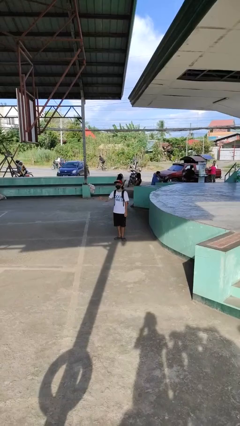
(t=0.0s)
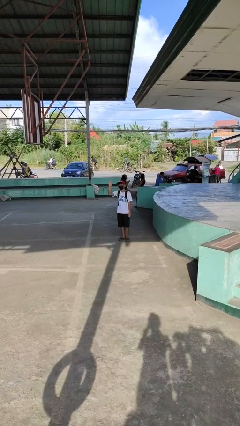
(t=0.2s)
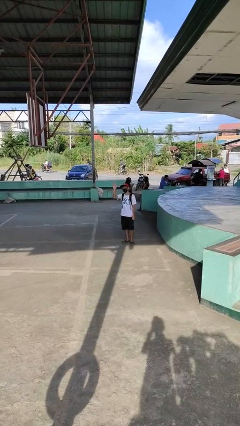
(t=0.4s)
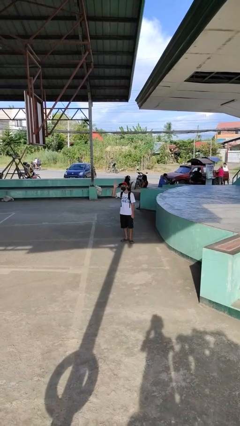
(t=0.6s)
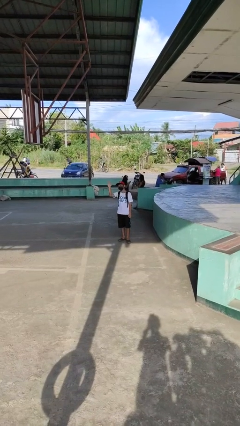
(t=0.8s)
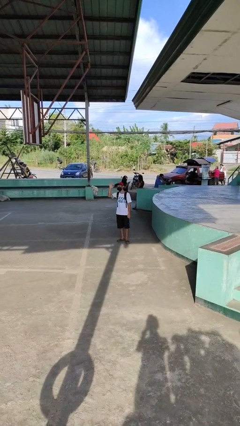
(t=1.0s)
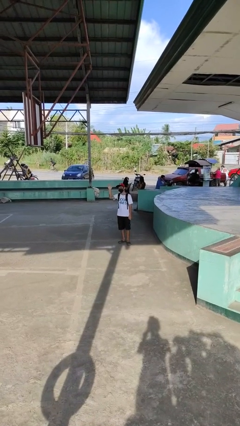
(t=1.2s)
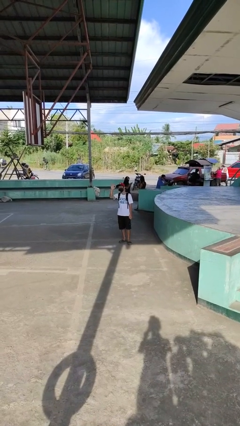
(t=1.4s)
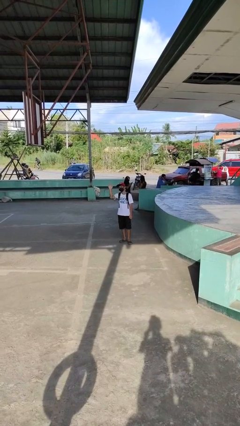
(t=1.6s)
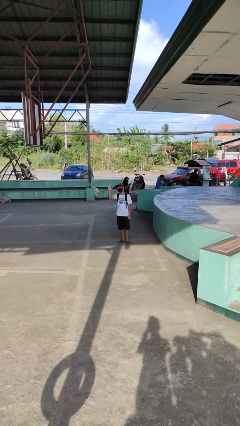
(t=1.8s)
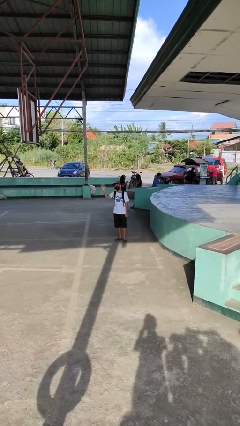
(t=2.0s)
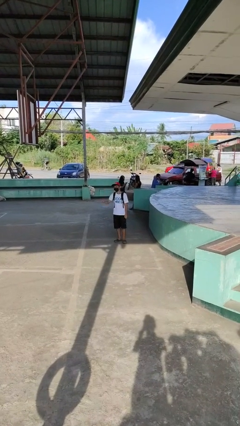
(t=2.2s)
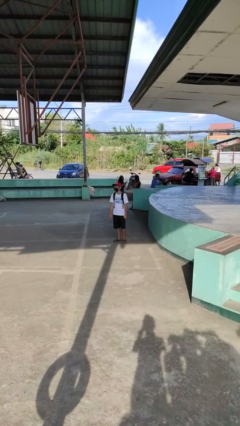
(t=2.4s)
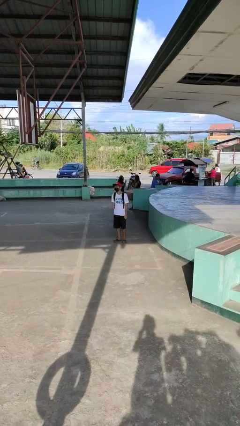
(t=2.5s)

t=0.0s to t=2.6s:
person waves at person

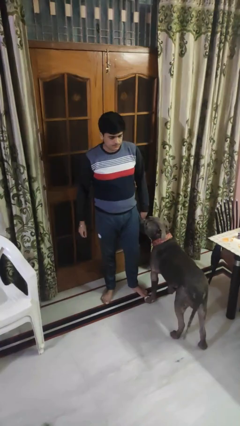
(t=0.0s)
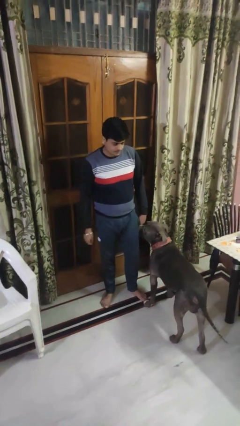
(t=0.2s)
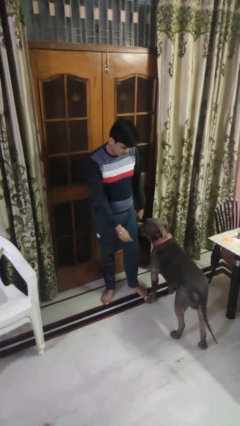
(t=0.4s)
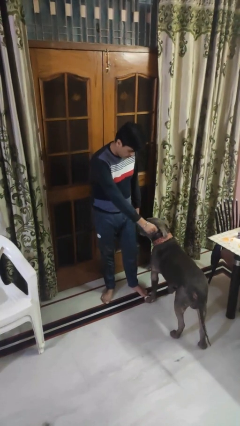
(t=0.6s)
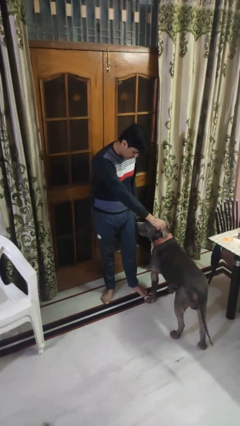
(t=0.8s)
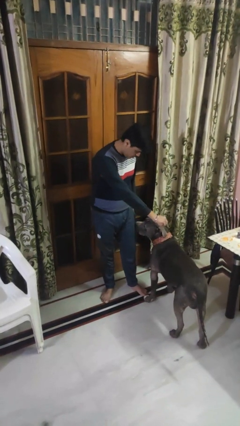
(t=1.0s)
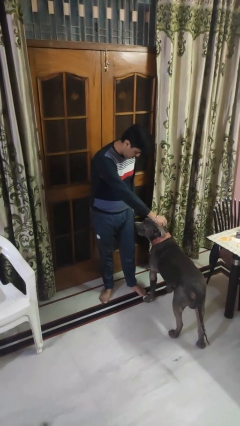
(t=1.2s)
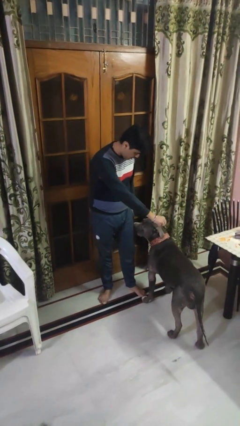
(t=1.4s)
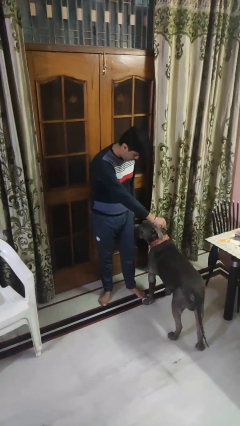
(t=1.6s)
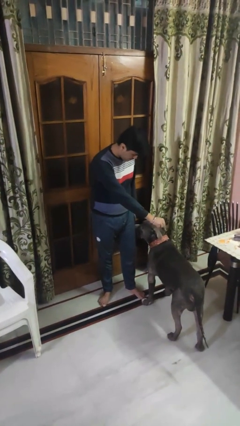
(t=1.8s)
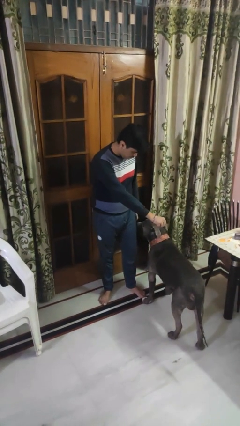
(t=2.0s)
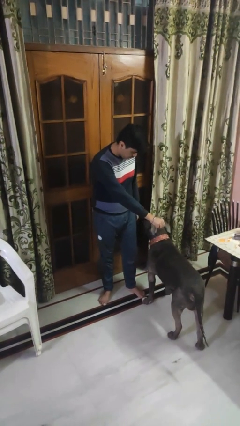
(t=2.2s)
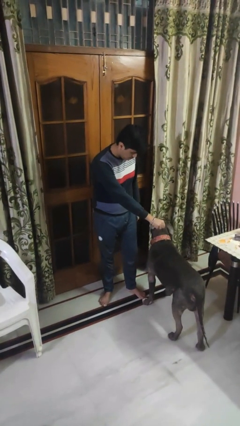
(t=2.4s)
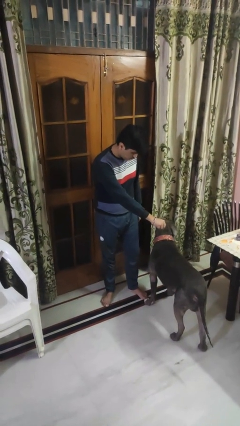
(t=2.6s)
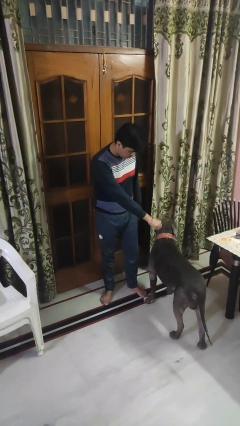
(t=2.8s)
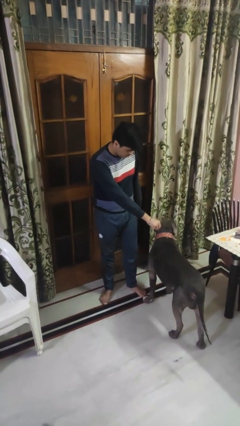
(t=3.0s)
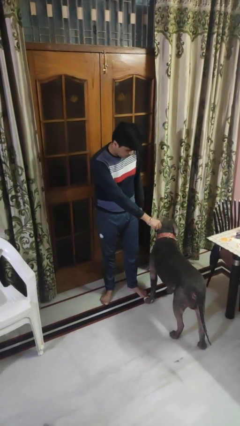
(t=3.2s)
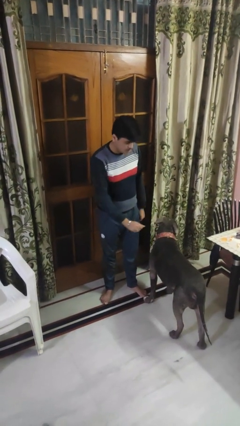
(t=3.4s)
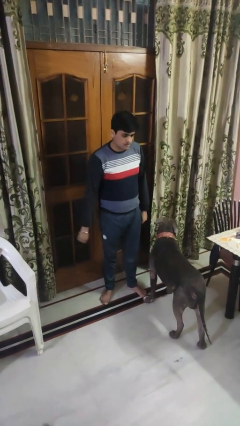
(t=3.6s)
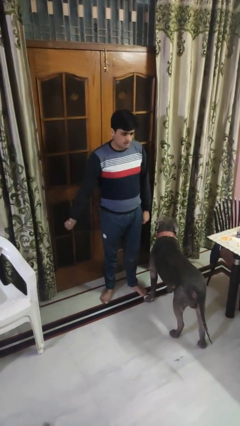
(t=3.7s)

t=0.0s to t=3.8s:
person points to dog

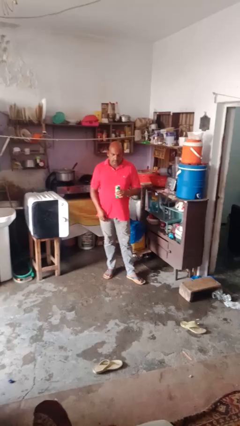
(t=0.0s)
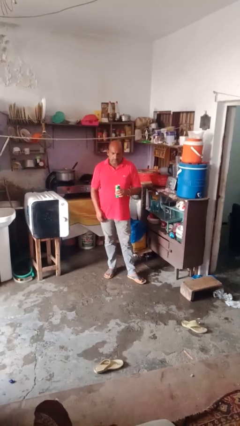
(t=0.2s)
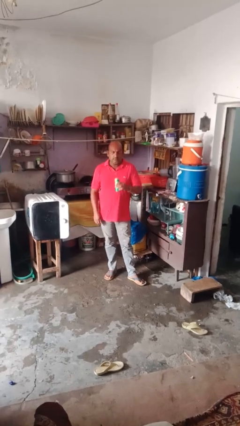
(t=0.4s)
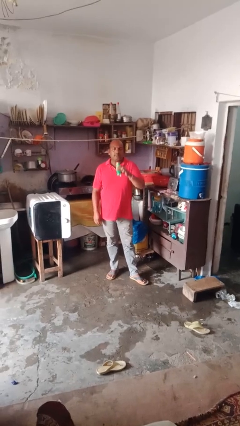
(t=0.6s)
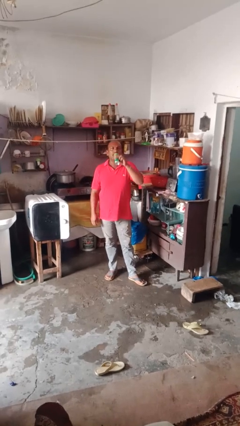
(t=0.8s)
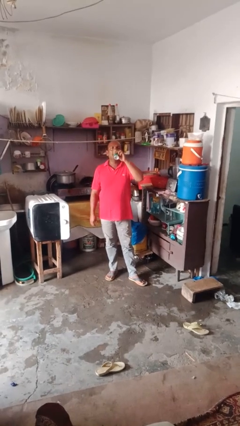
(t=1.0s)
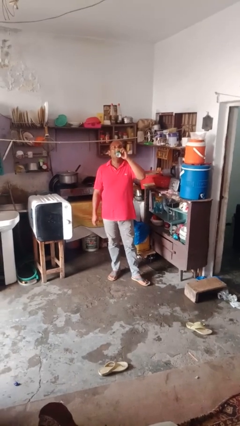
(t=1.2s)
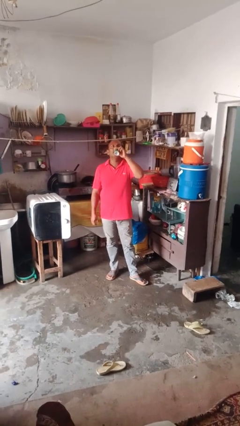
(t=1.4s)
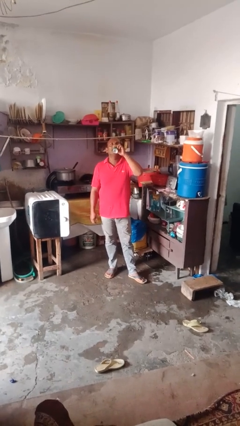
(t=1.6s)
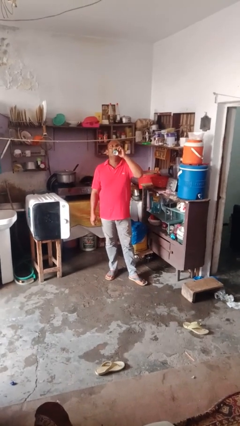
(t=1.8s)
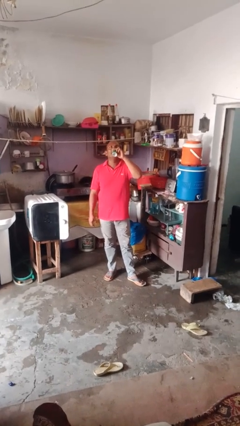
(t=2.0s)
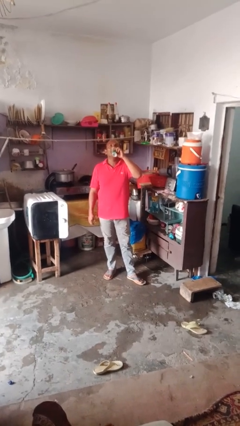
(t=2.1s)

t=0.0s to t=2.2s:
person drinks from beverage can

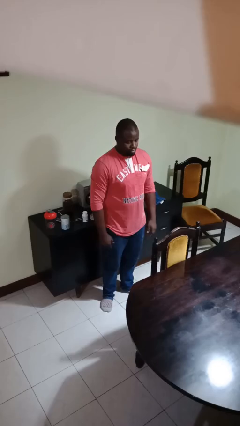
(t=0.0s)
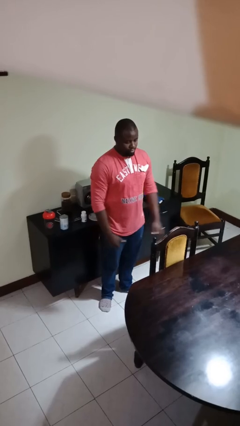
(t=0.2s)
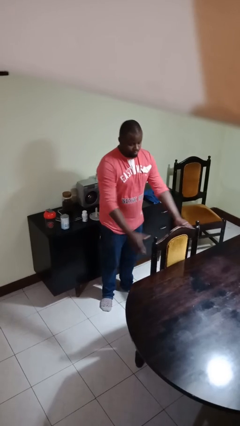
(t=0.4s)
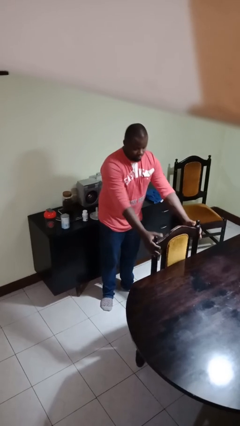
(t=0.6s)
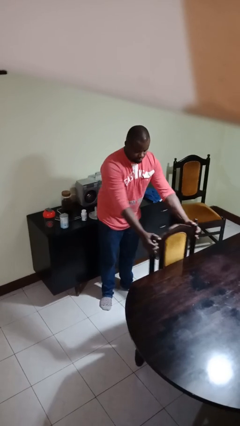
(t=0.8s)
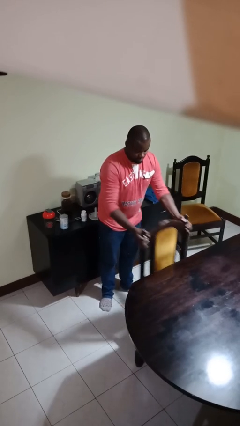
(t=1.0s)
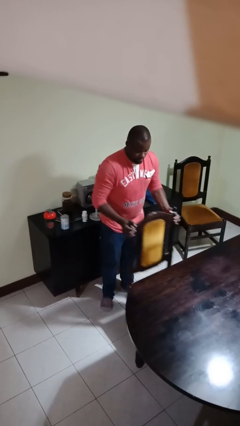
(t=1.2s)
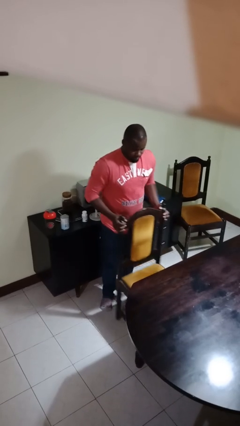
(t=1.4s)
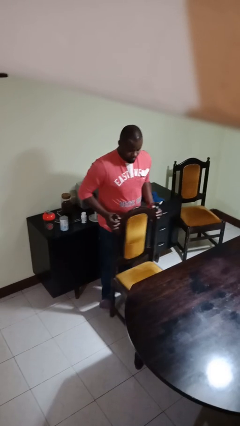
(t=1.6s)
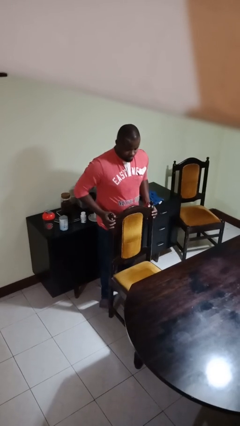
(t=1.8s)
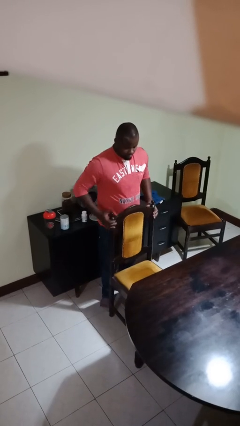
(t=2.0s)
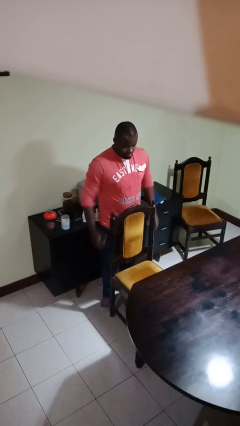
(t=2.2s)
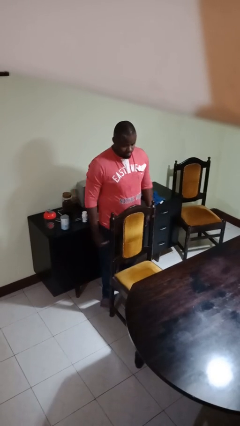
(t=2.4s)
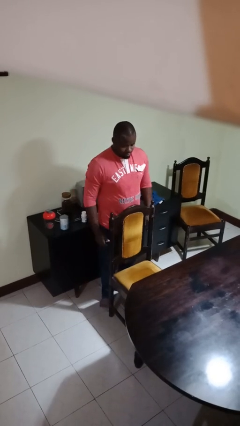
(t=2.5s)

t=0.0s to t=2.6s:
person pulls out chair

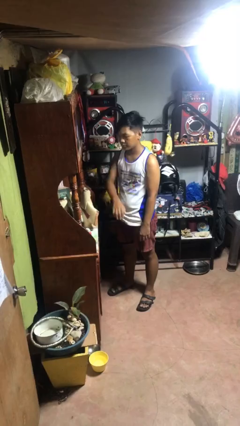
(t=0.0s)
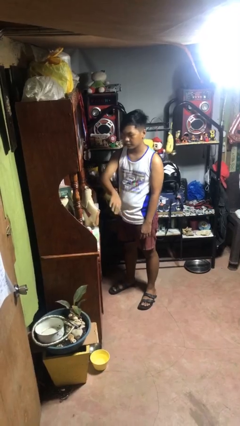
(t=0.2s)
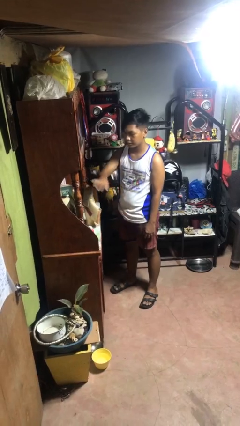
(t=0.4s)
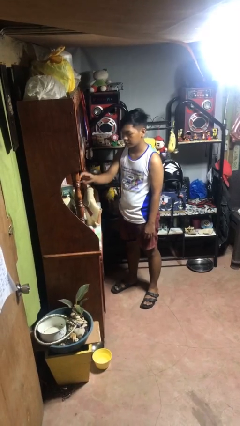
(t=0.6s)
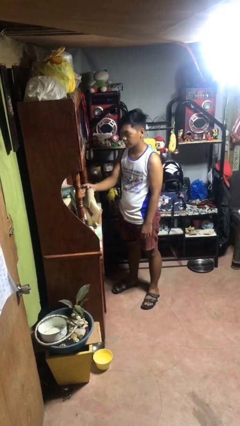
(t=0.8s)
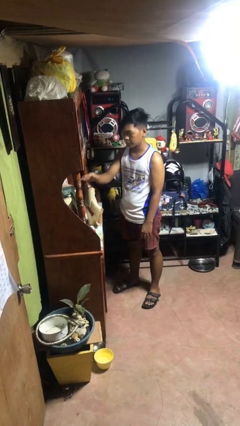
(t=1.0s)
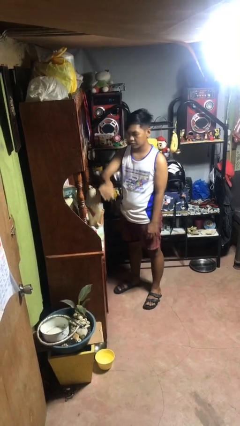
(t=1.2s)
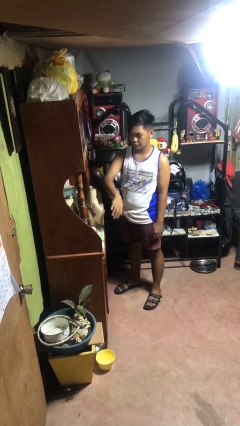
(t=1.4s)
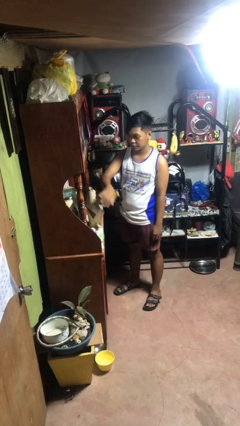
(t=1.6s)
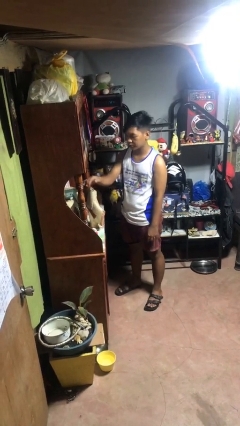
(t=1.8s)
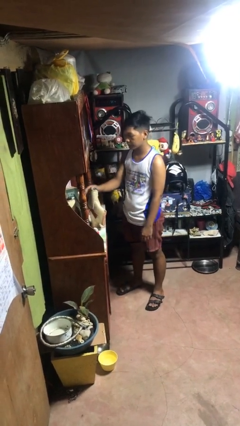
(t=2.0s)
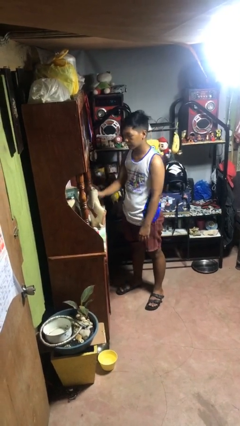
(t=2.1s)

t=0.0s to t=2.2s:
person waves hand over object

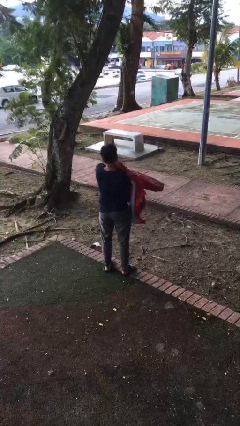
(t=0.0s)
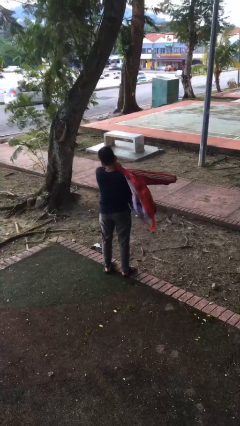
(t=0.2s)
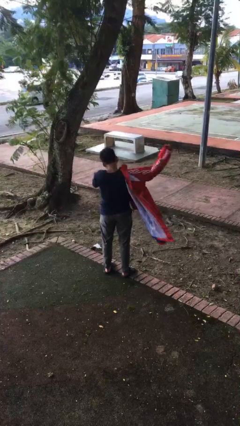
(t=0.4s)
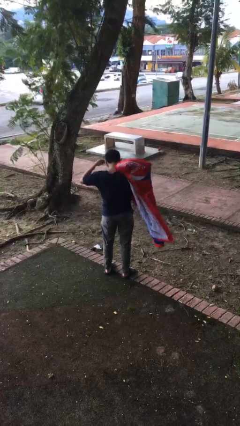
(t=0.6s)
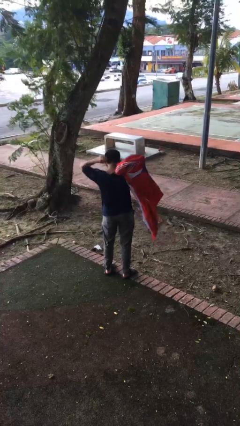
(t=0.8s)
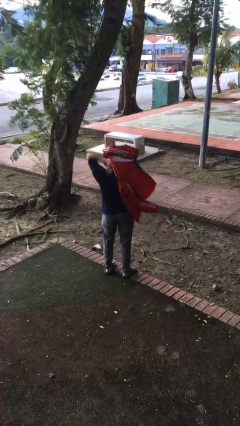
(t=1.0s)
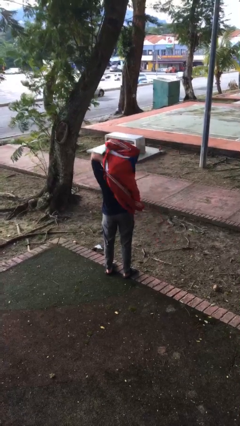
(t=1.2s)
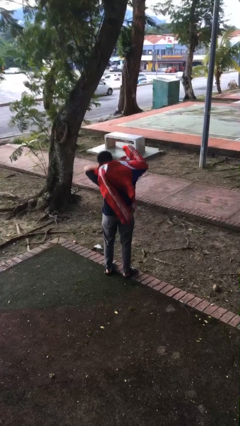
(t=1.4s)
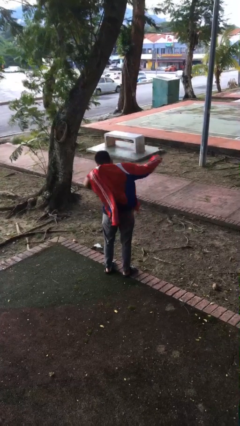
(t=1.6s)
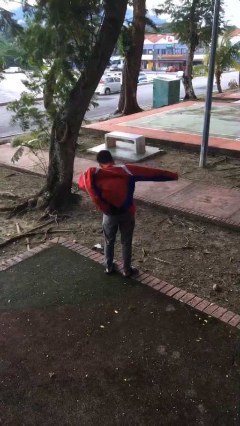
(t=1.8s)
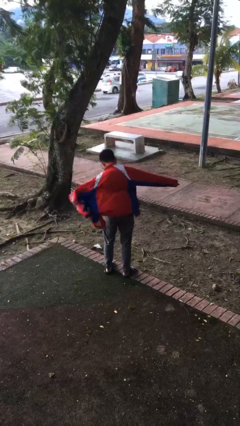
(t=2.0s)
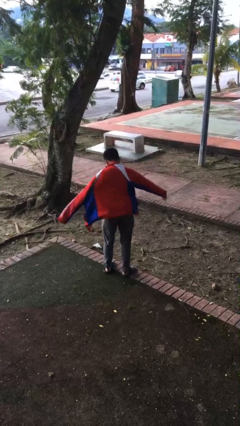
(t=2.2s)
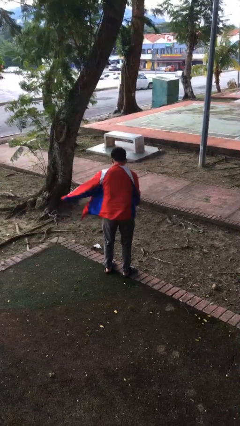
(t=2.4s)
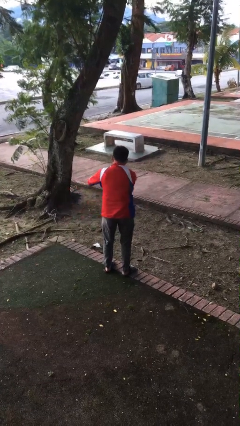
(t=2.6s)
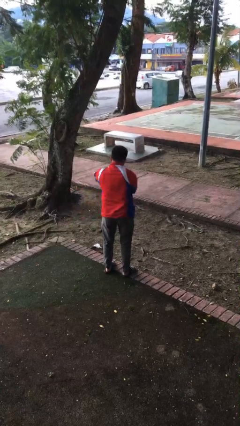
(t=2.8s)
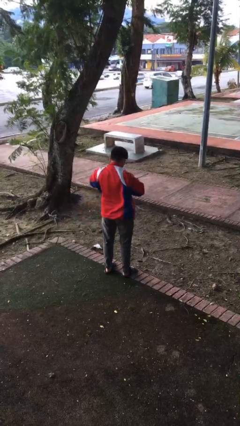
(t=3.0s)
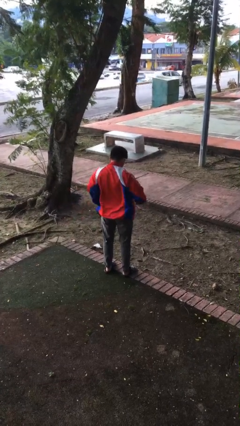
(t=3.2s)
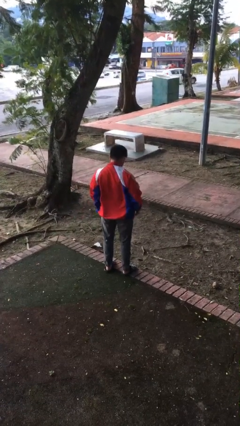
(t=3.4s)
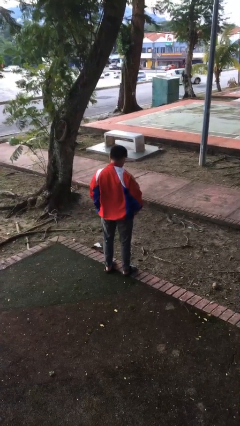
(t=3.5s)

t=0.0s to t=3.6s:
person puts on jacket

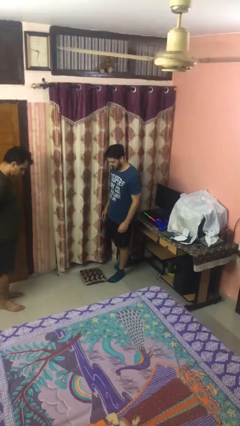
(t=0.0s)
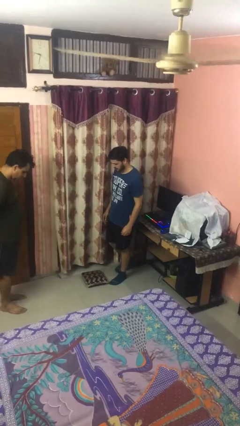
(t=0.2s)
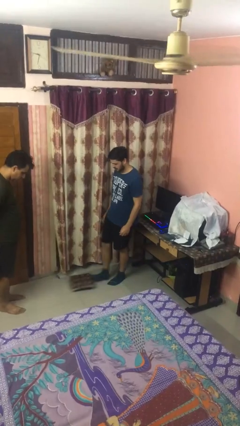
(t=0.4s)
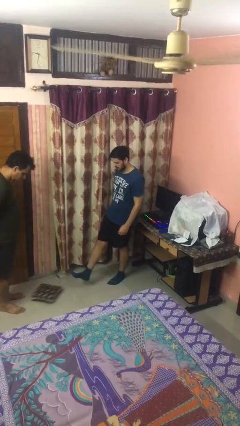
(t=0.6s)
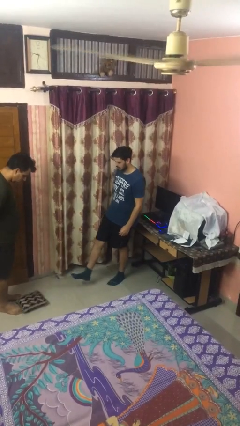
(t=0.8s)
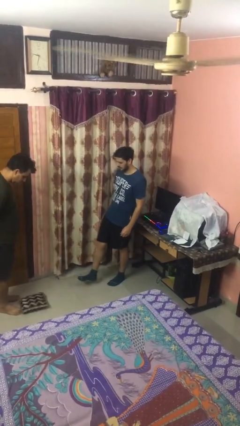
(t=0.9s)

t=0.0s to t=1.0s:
person kicks object to person
